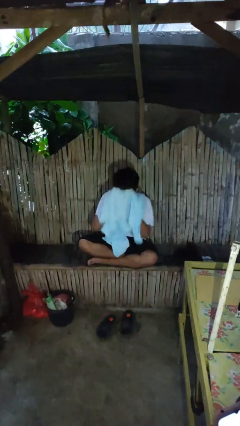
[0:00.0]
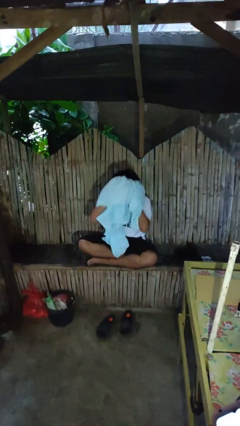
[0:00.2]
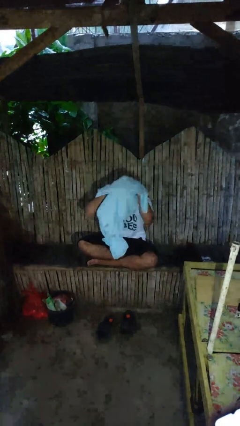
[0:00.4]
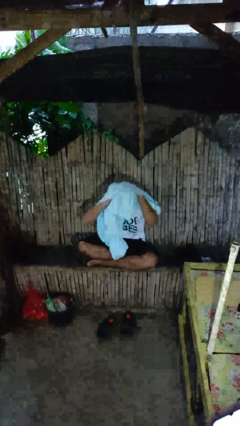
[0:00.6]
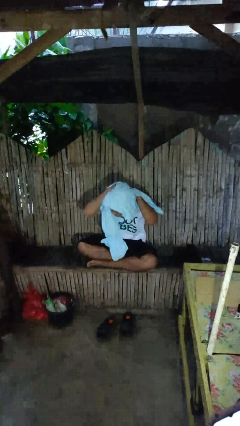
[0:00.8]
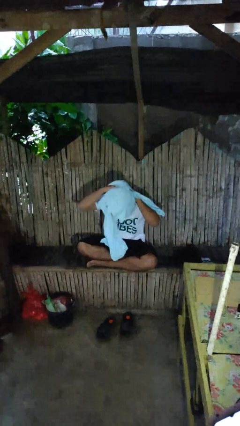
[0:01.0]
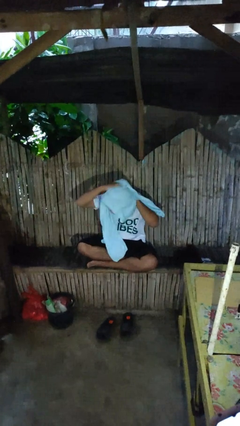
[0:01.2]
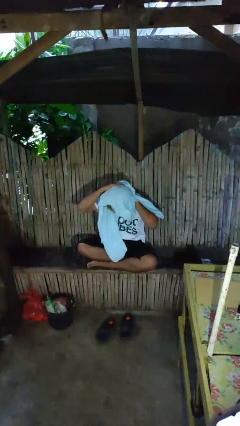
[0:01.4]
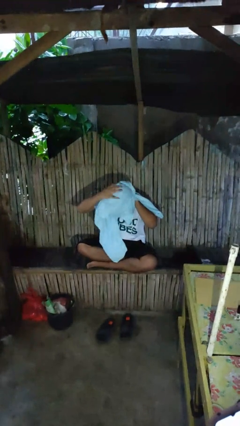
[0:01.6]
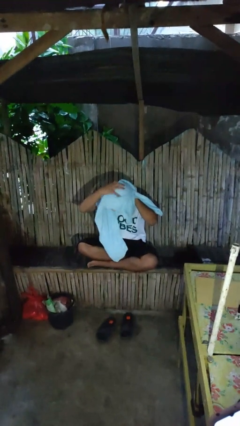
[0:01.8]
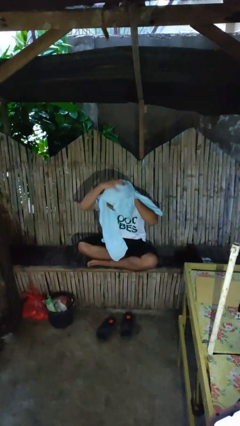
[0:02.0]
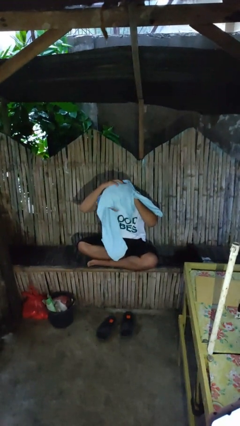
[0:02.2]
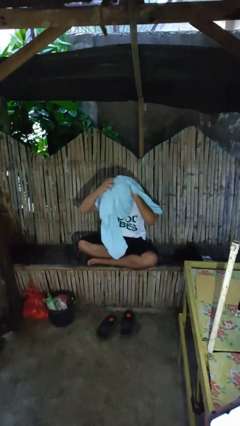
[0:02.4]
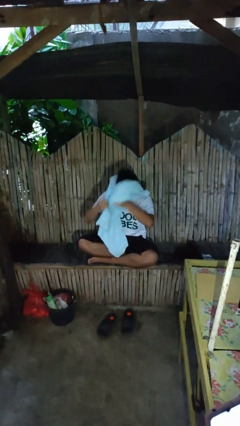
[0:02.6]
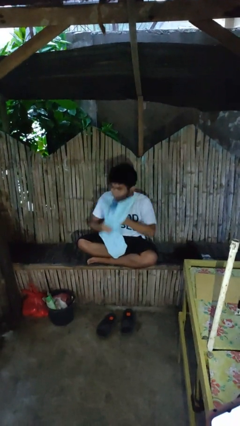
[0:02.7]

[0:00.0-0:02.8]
person dries hair with hairdryer

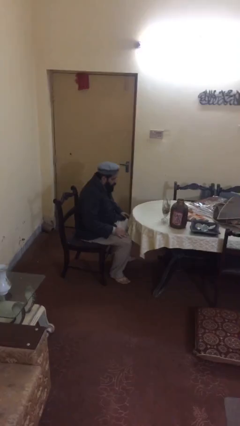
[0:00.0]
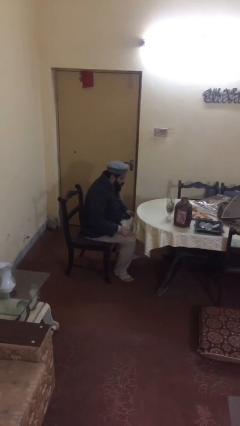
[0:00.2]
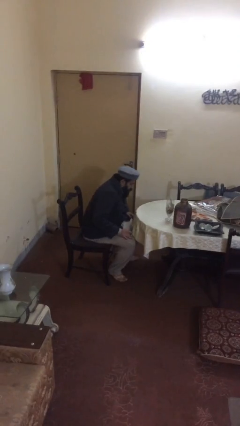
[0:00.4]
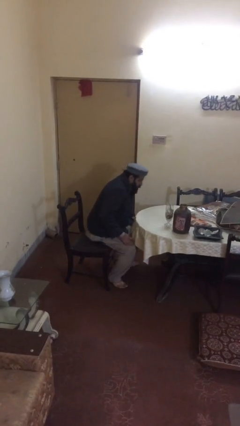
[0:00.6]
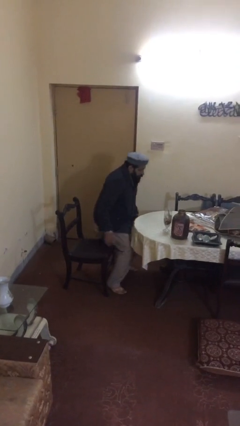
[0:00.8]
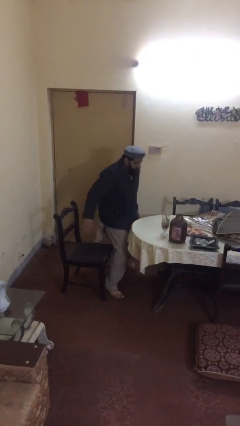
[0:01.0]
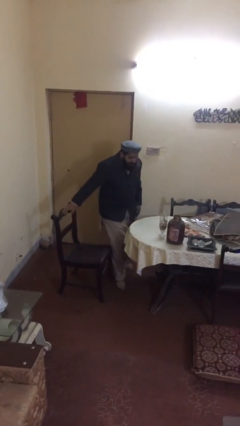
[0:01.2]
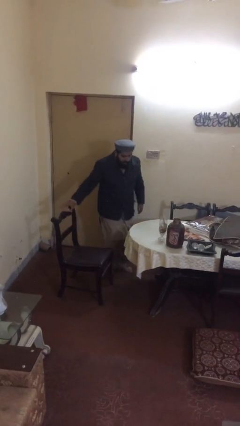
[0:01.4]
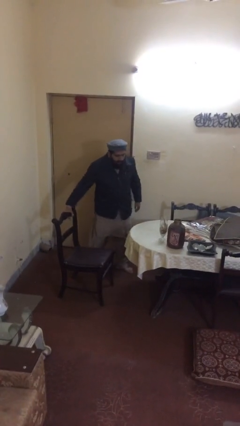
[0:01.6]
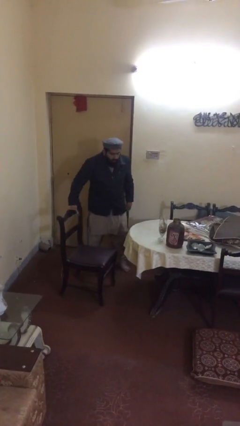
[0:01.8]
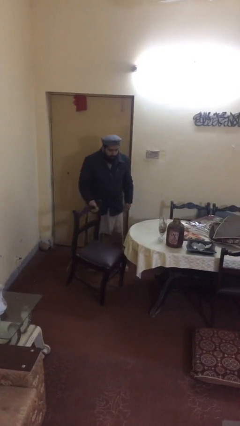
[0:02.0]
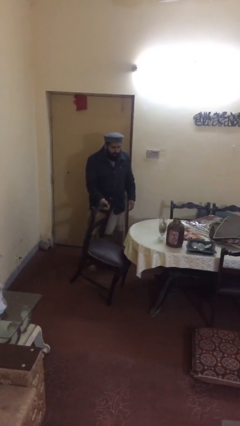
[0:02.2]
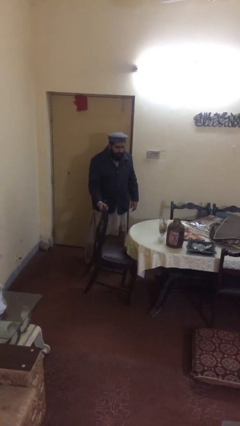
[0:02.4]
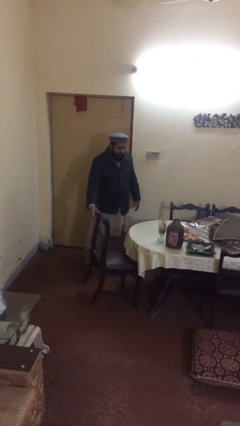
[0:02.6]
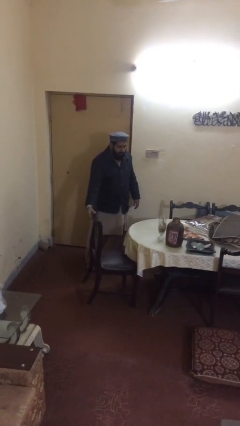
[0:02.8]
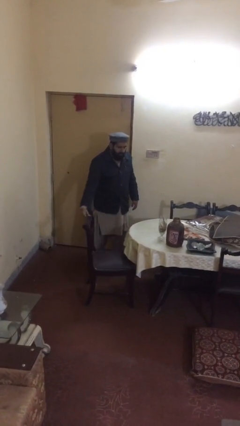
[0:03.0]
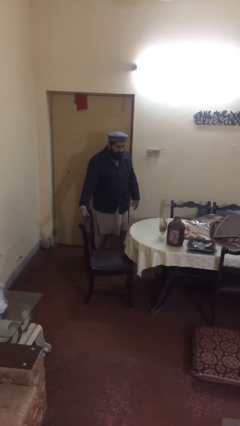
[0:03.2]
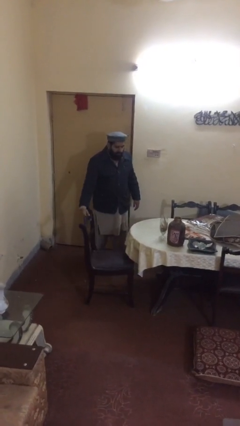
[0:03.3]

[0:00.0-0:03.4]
person stands up

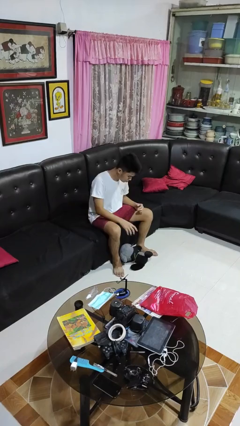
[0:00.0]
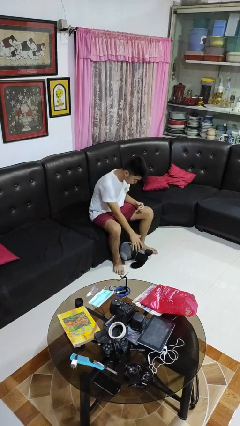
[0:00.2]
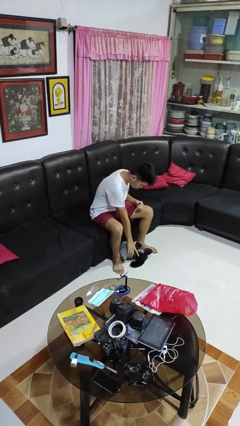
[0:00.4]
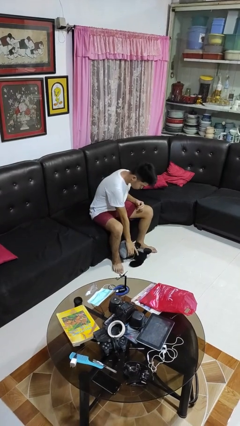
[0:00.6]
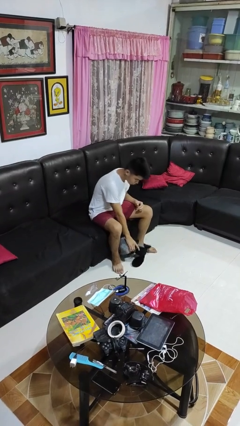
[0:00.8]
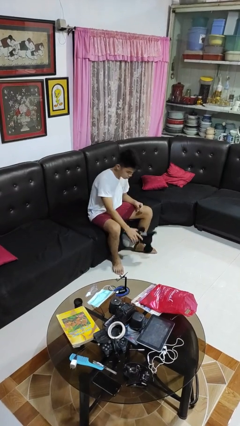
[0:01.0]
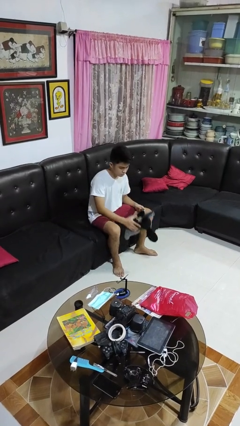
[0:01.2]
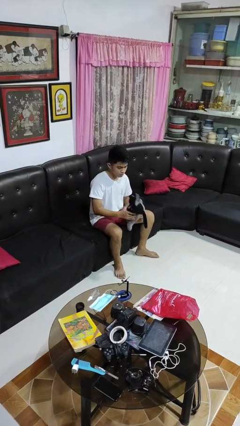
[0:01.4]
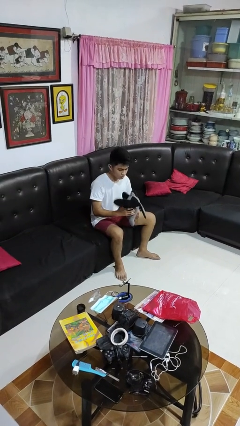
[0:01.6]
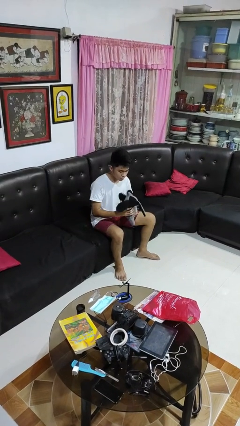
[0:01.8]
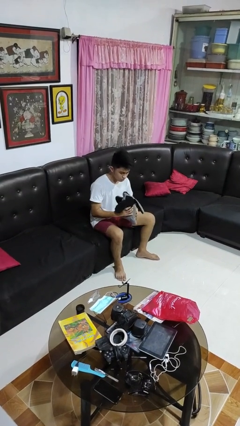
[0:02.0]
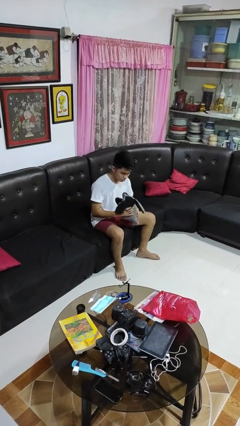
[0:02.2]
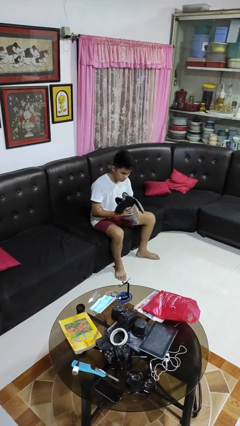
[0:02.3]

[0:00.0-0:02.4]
person picks up object from floor

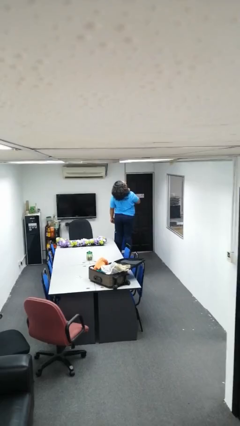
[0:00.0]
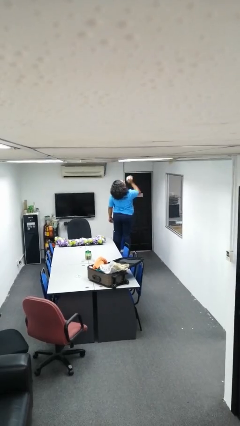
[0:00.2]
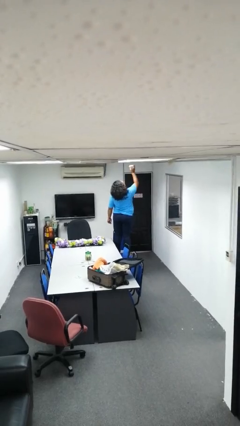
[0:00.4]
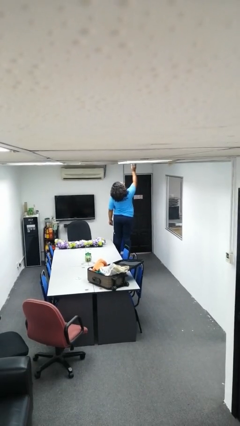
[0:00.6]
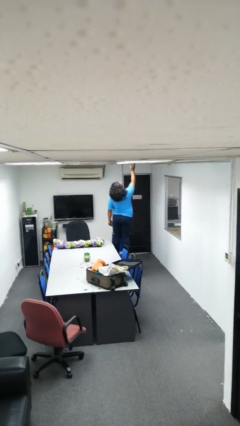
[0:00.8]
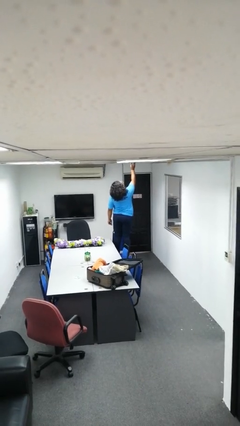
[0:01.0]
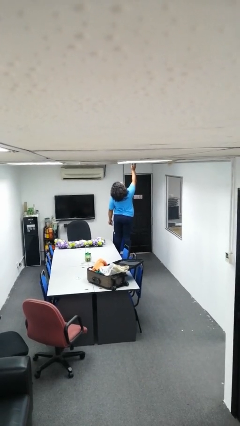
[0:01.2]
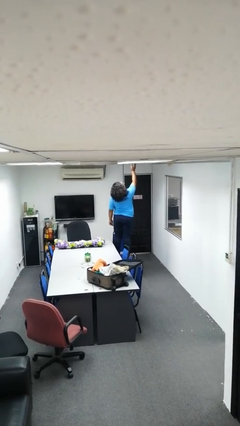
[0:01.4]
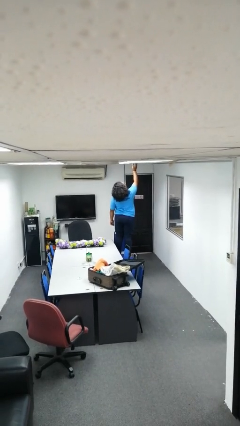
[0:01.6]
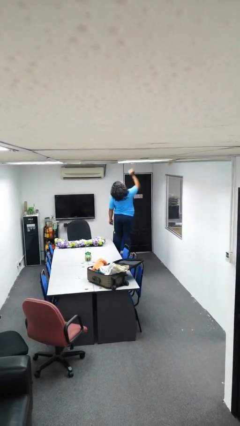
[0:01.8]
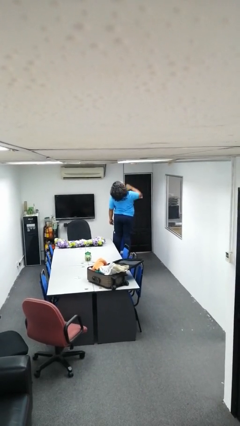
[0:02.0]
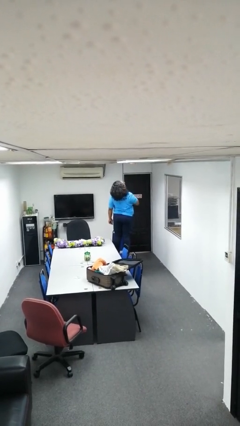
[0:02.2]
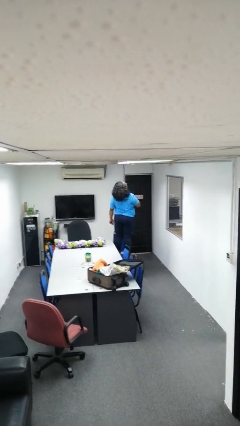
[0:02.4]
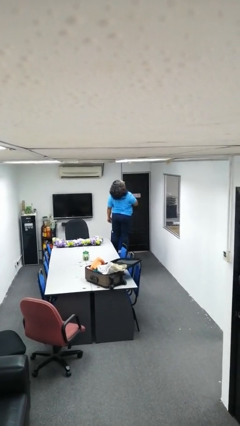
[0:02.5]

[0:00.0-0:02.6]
person puts up smoke detector

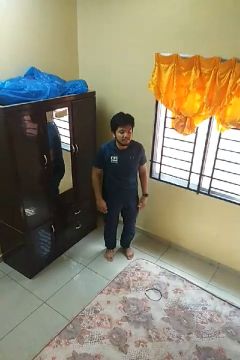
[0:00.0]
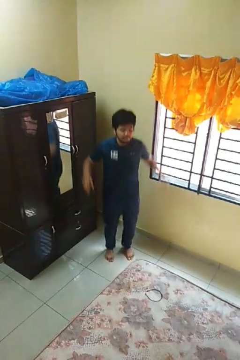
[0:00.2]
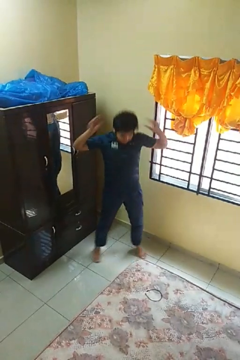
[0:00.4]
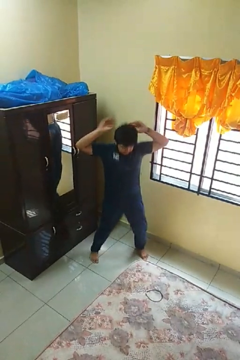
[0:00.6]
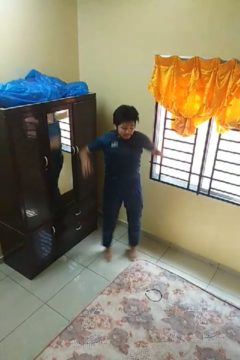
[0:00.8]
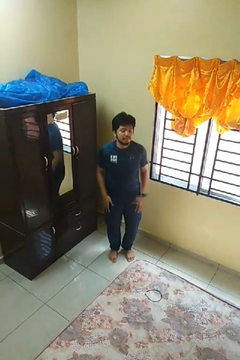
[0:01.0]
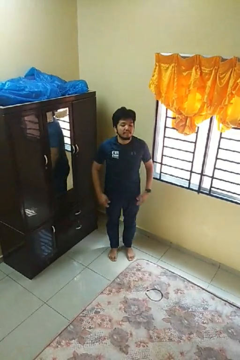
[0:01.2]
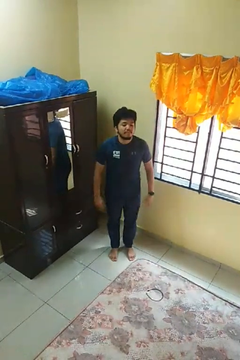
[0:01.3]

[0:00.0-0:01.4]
person exercises with jumping jacks

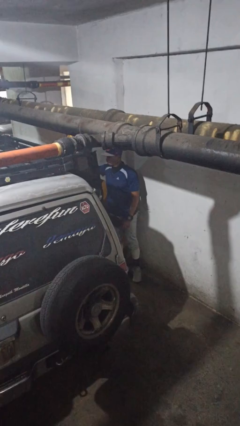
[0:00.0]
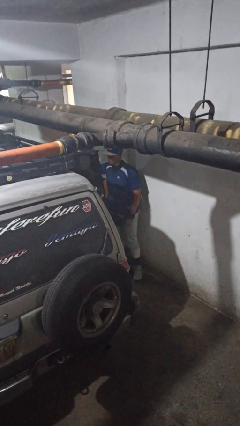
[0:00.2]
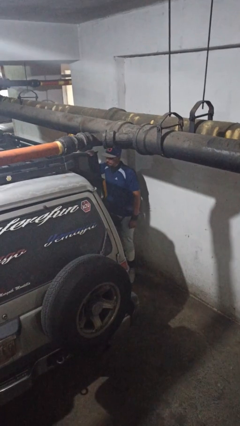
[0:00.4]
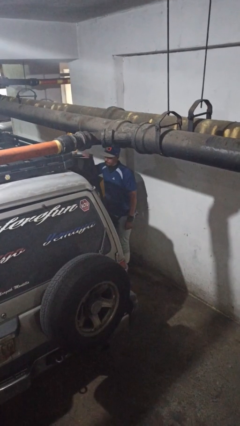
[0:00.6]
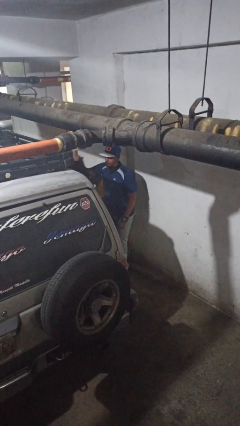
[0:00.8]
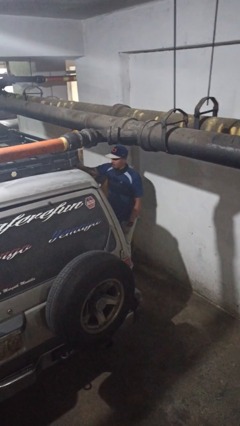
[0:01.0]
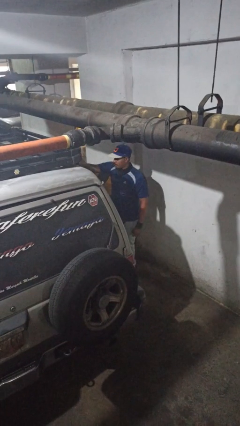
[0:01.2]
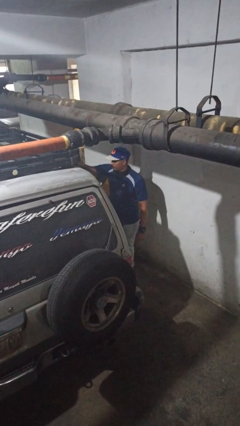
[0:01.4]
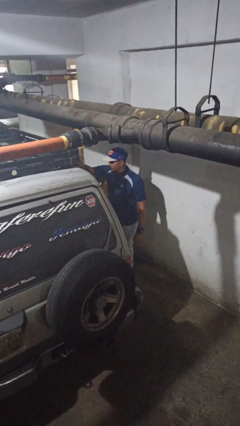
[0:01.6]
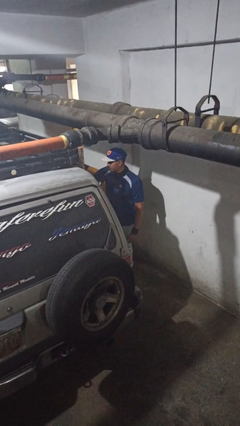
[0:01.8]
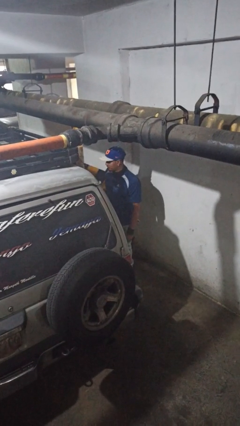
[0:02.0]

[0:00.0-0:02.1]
person closes car door

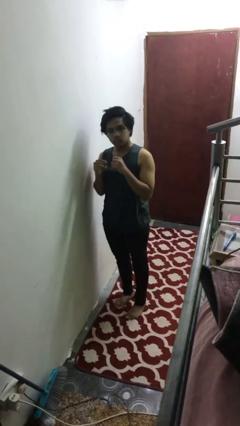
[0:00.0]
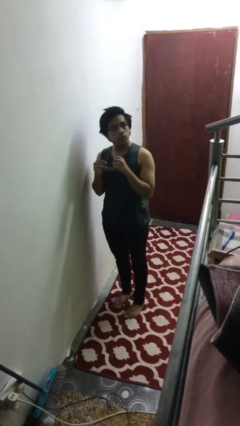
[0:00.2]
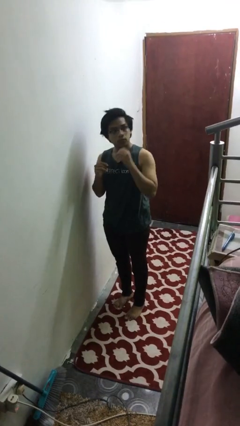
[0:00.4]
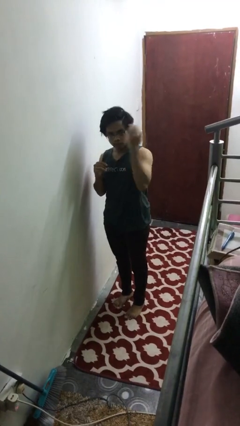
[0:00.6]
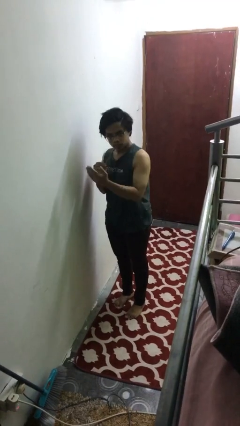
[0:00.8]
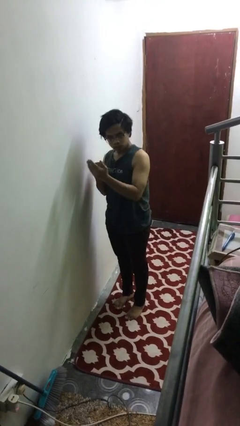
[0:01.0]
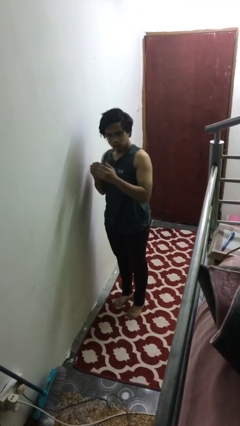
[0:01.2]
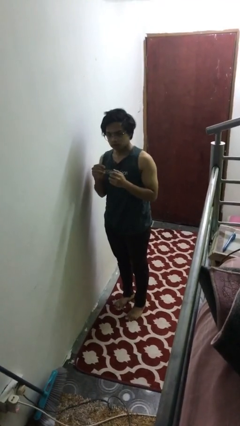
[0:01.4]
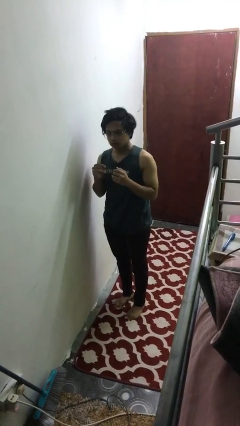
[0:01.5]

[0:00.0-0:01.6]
person karate chop

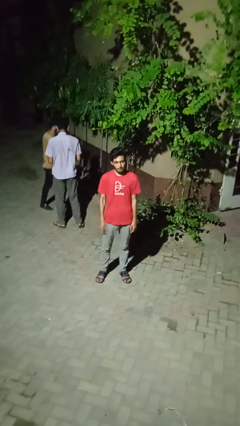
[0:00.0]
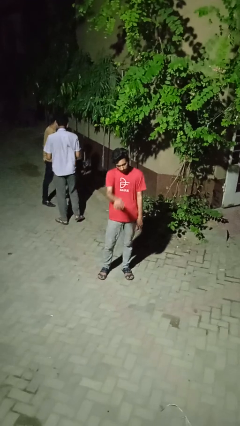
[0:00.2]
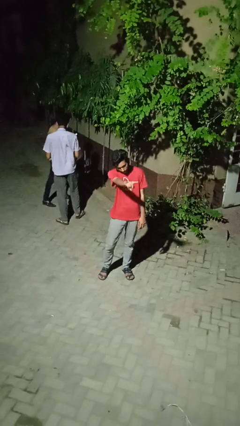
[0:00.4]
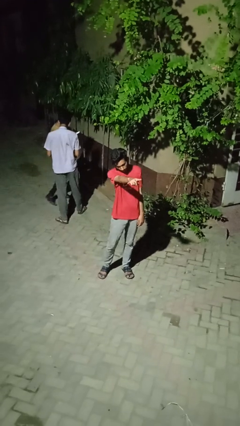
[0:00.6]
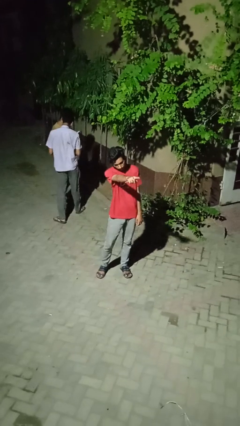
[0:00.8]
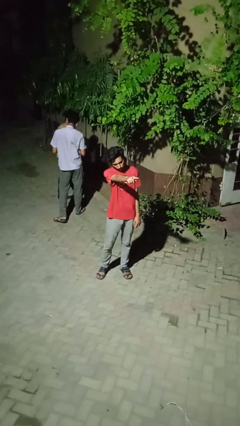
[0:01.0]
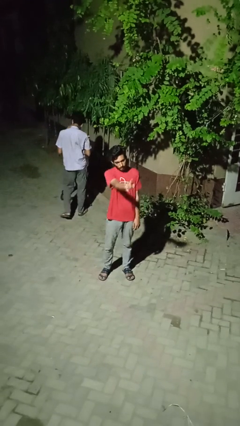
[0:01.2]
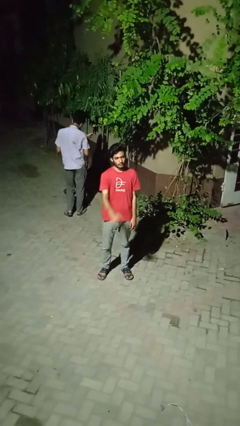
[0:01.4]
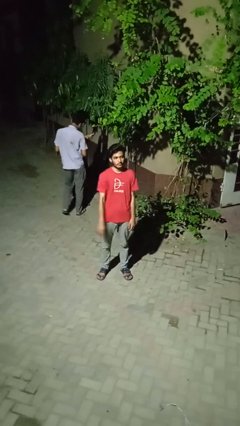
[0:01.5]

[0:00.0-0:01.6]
person points at person
